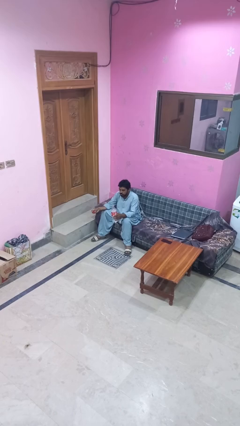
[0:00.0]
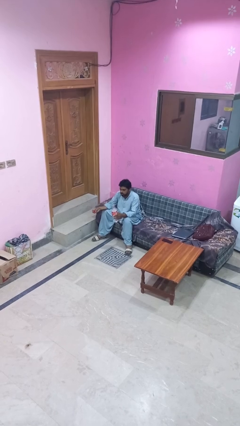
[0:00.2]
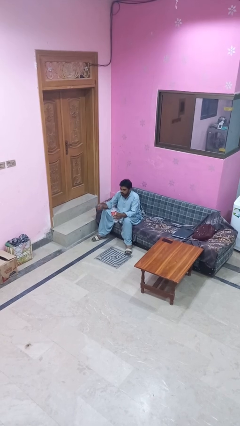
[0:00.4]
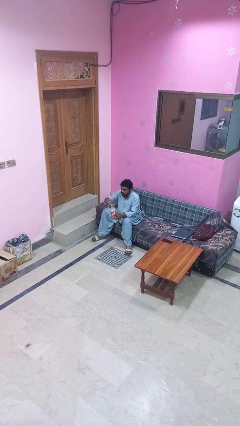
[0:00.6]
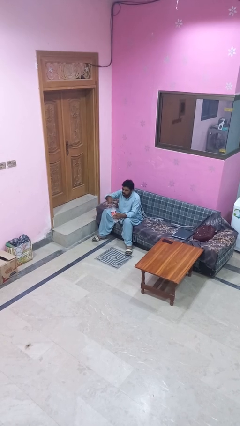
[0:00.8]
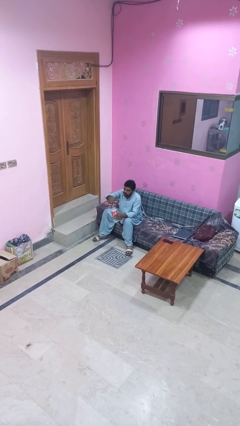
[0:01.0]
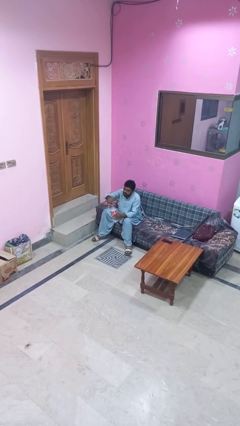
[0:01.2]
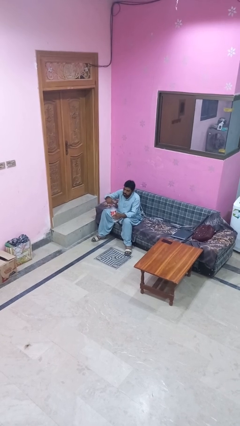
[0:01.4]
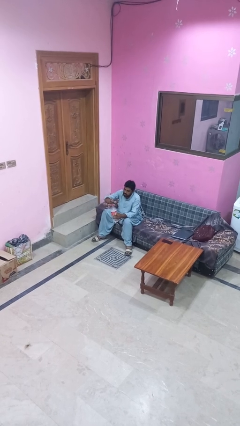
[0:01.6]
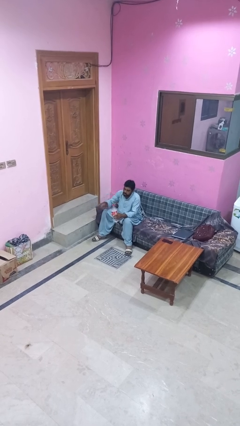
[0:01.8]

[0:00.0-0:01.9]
person screws lid to bottle

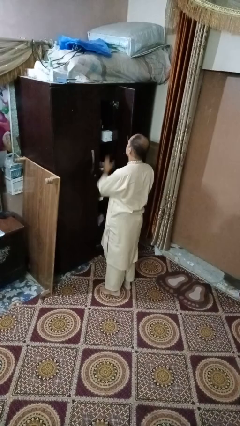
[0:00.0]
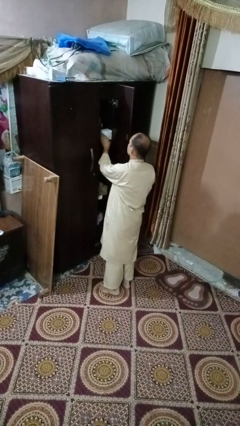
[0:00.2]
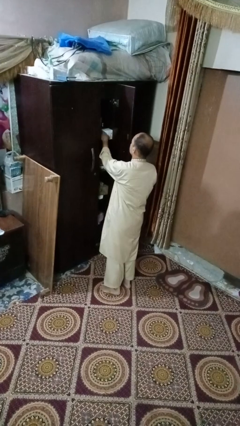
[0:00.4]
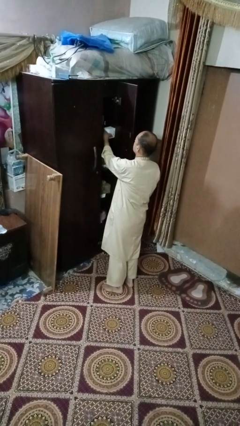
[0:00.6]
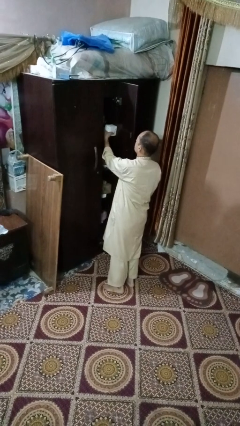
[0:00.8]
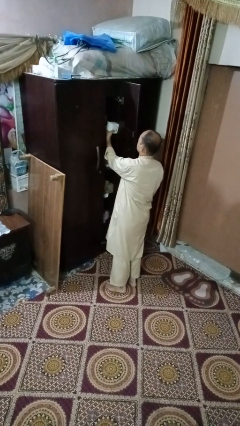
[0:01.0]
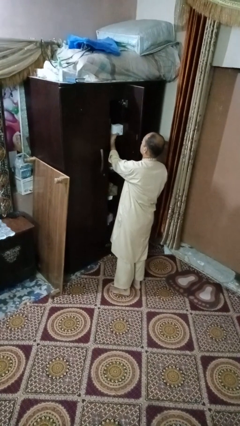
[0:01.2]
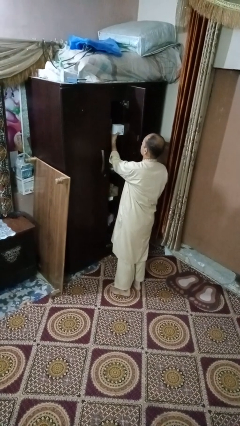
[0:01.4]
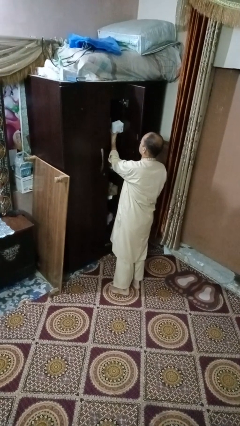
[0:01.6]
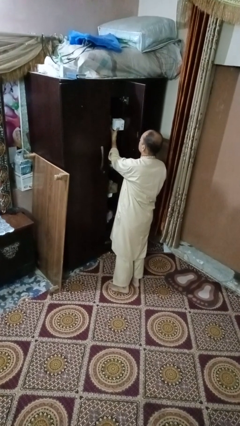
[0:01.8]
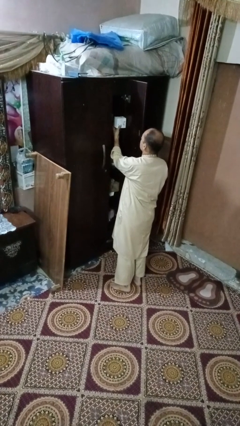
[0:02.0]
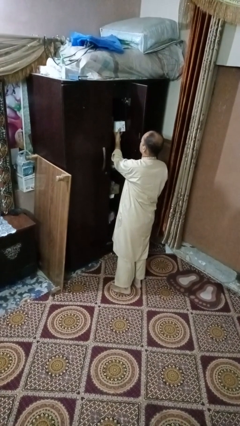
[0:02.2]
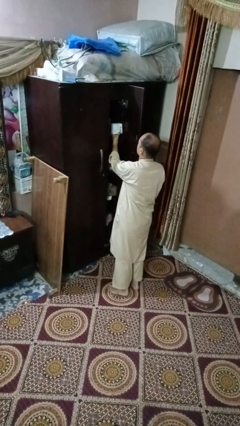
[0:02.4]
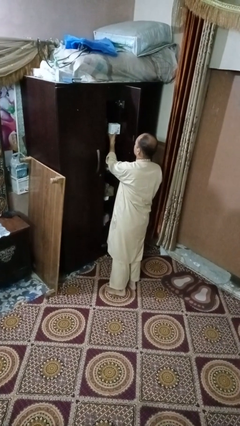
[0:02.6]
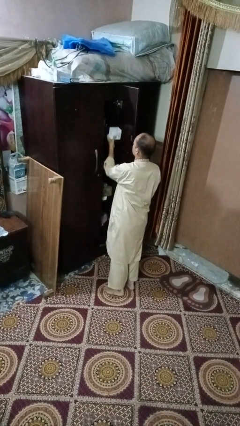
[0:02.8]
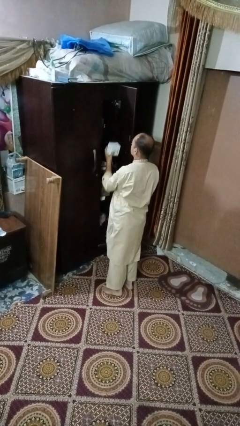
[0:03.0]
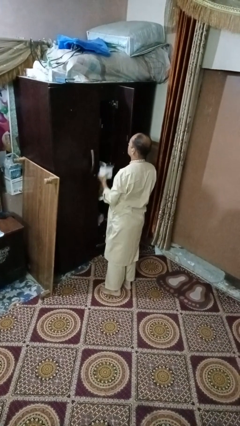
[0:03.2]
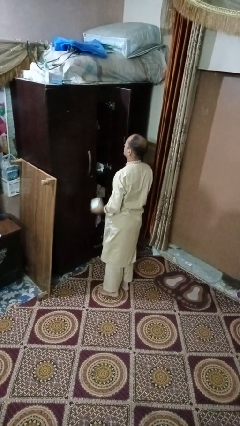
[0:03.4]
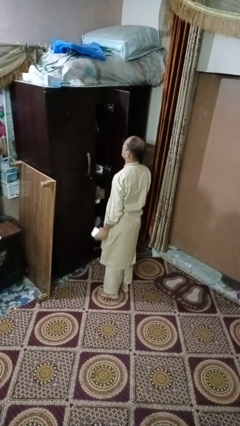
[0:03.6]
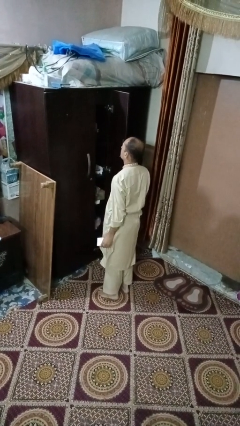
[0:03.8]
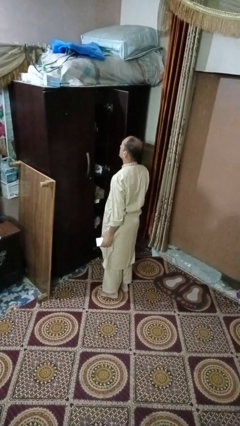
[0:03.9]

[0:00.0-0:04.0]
person picks up object from cabinet

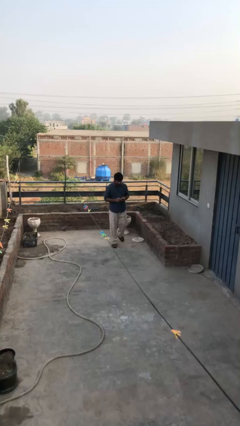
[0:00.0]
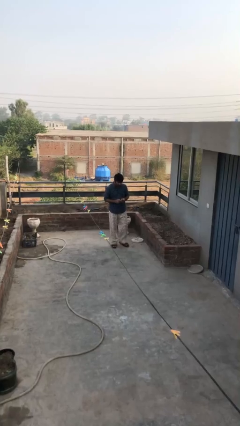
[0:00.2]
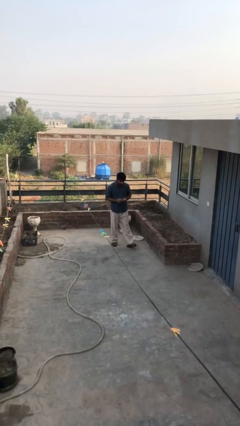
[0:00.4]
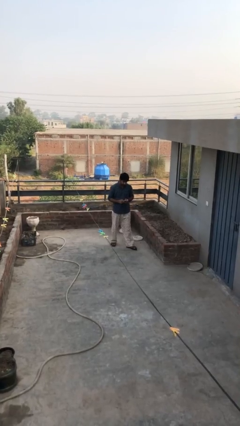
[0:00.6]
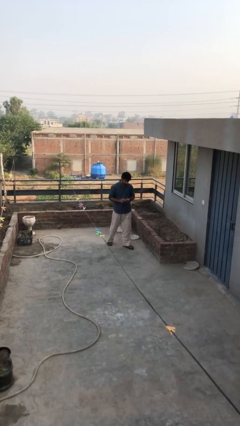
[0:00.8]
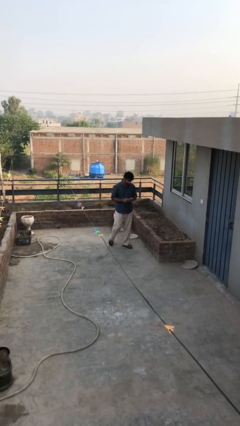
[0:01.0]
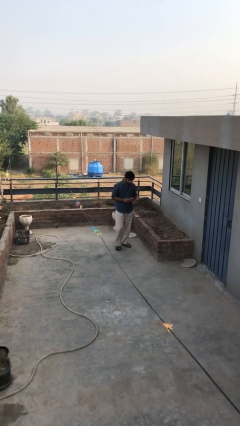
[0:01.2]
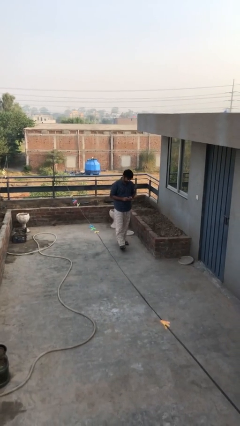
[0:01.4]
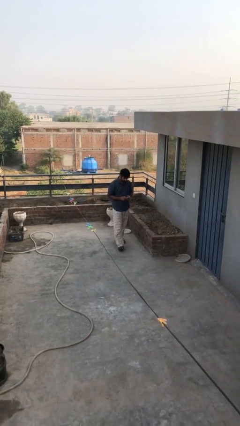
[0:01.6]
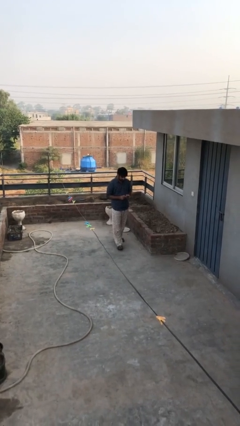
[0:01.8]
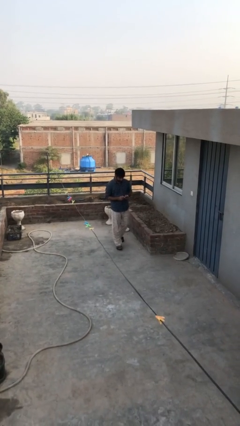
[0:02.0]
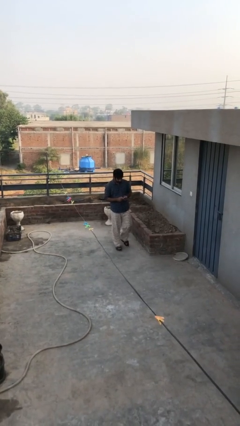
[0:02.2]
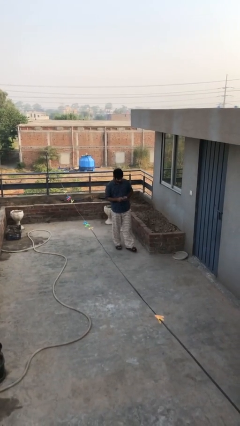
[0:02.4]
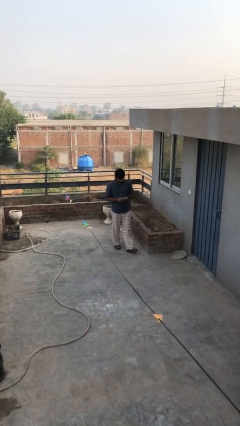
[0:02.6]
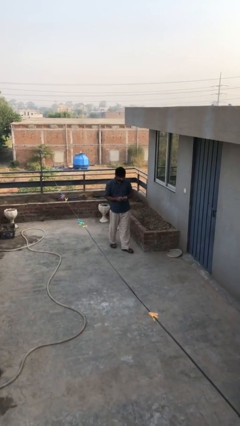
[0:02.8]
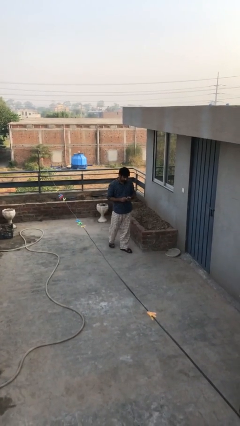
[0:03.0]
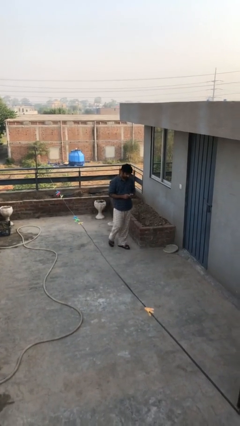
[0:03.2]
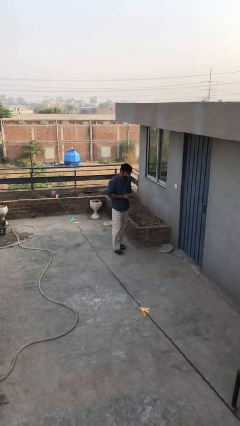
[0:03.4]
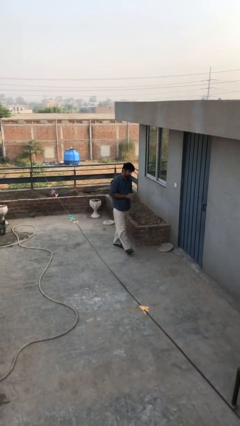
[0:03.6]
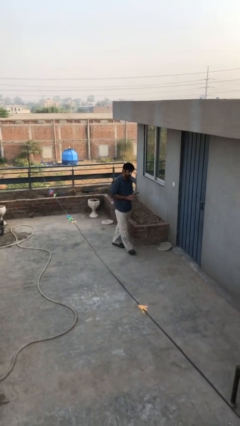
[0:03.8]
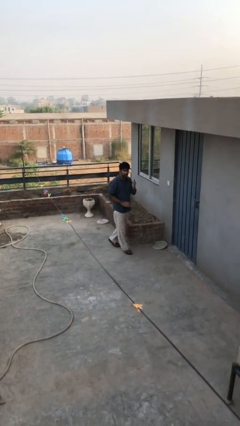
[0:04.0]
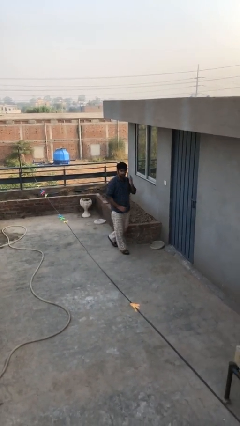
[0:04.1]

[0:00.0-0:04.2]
person texts on phone

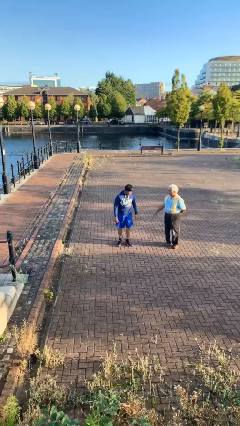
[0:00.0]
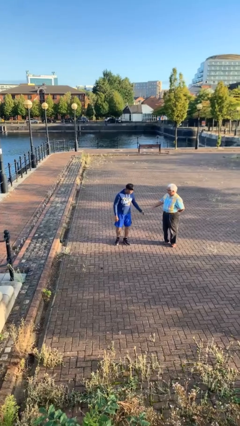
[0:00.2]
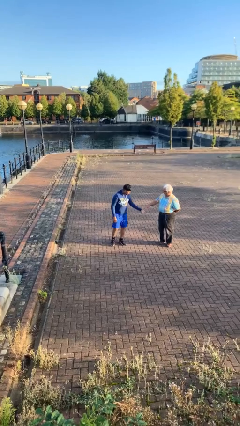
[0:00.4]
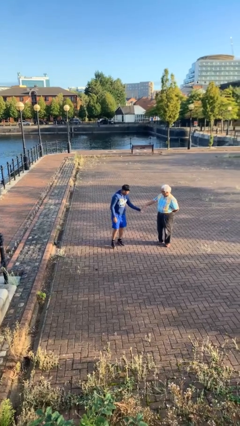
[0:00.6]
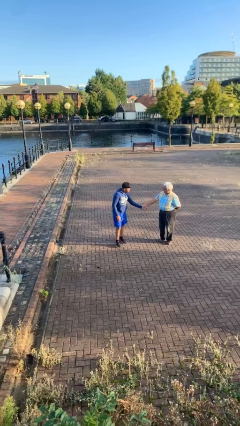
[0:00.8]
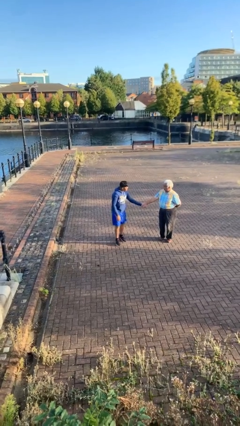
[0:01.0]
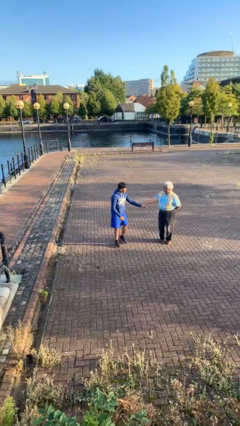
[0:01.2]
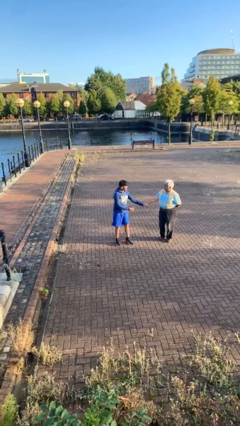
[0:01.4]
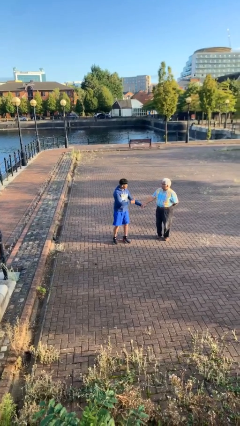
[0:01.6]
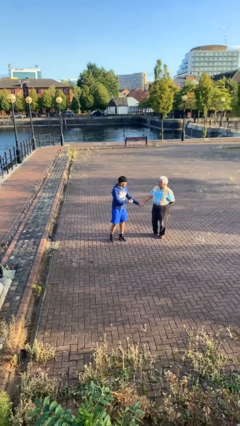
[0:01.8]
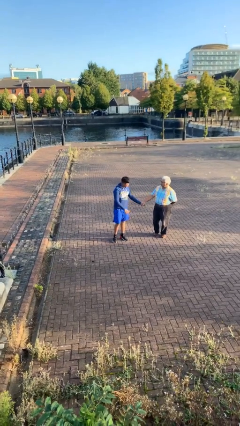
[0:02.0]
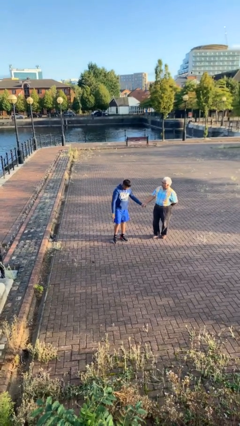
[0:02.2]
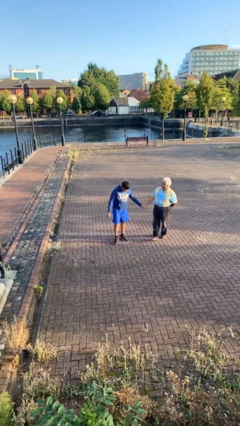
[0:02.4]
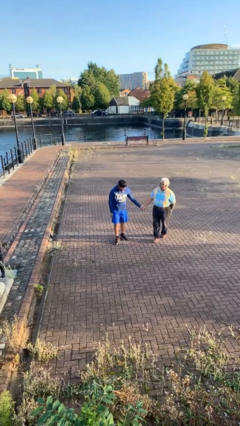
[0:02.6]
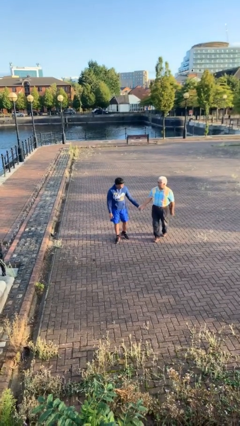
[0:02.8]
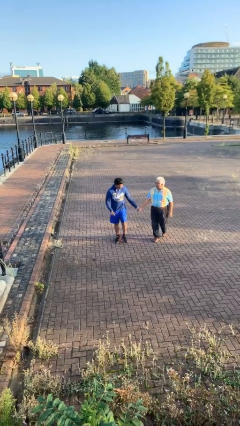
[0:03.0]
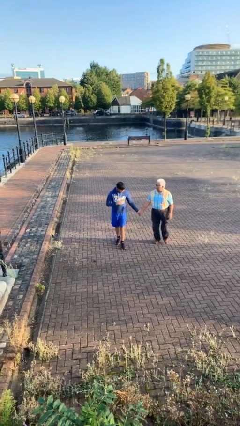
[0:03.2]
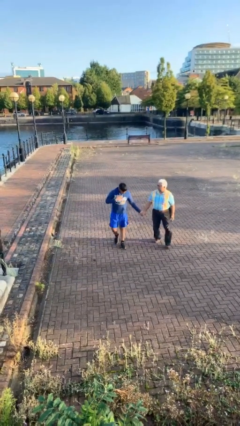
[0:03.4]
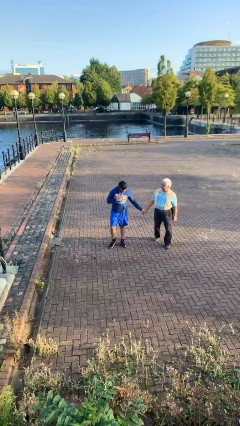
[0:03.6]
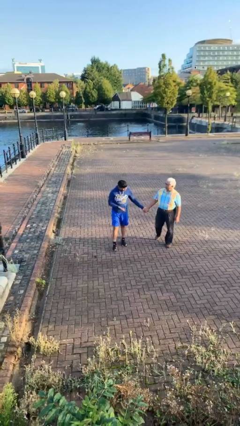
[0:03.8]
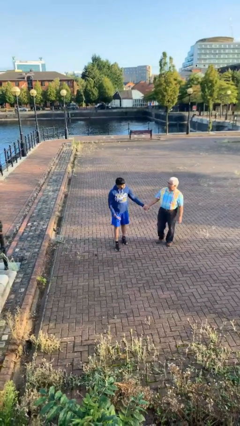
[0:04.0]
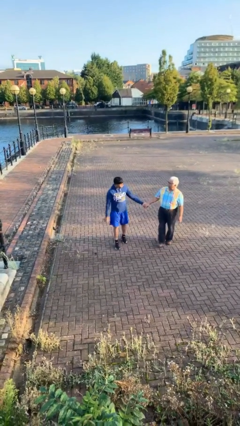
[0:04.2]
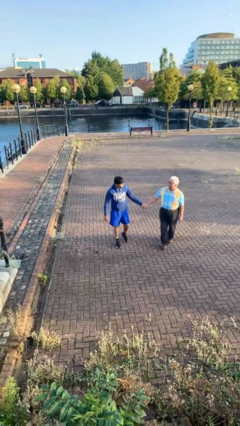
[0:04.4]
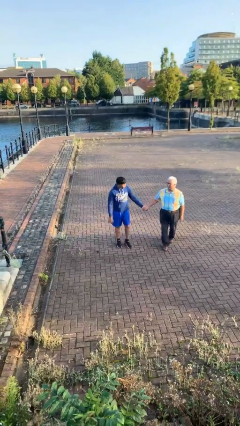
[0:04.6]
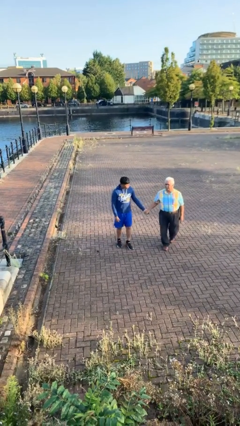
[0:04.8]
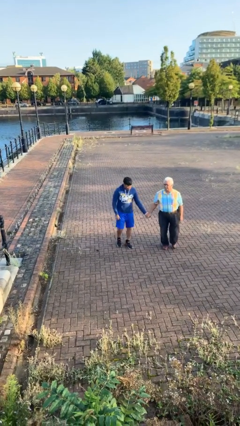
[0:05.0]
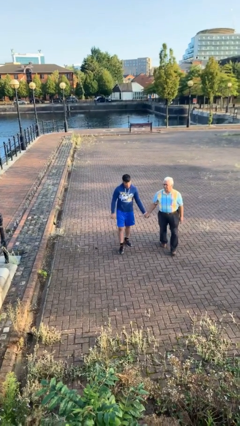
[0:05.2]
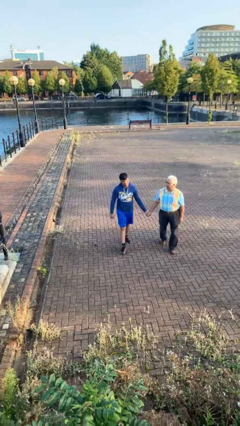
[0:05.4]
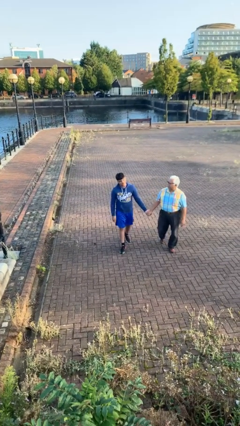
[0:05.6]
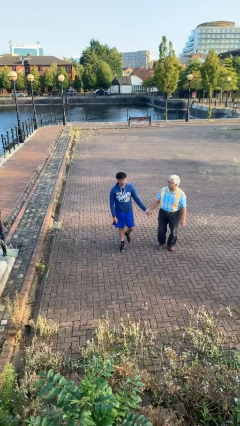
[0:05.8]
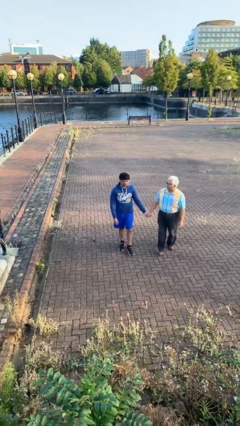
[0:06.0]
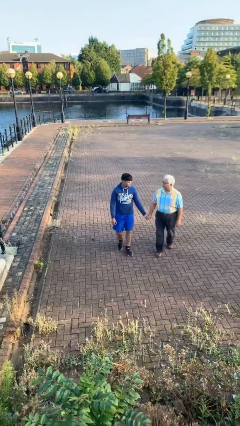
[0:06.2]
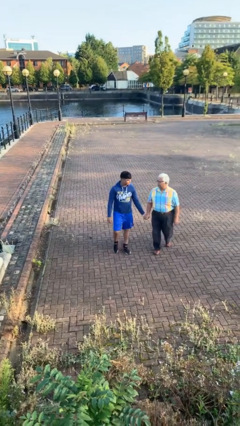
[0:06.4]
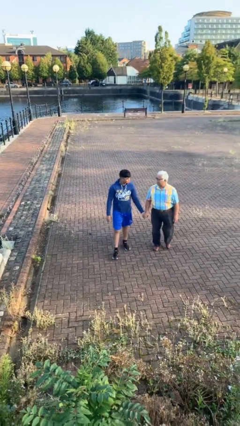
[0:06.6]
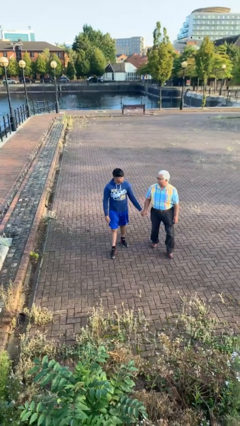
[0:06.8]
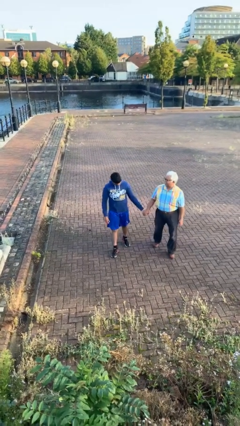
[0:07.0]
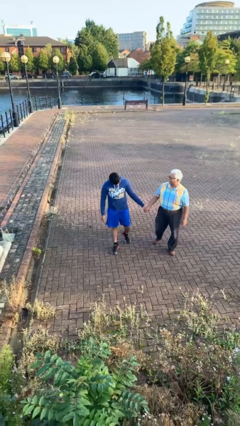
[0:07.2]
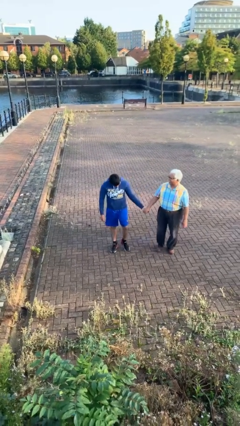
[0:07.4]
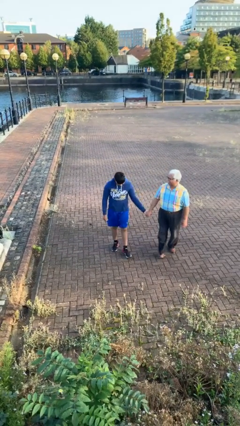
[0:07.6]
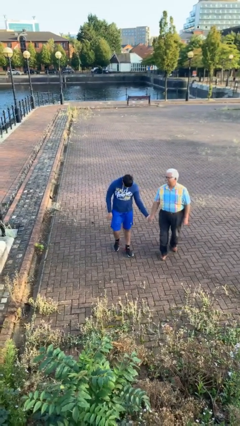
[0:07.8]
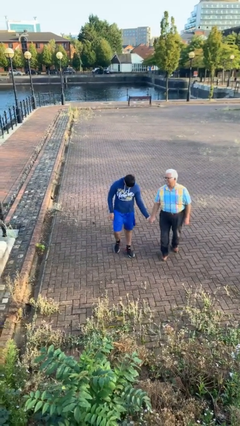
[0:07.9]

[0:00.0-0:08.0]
person holds hand
